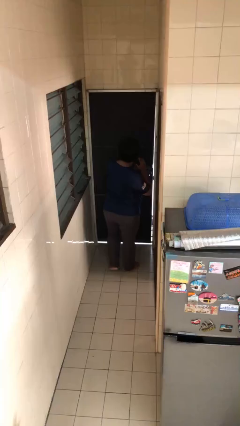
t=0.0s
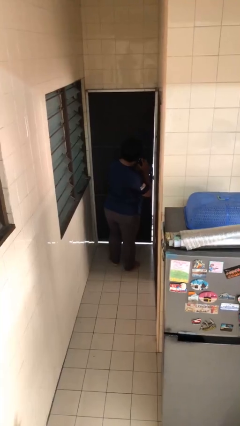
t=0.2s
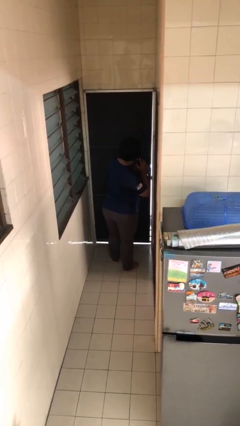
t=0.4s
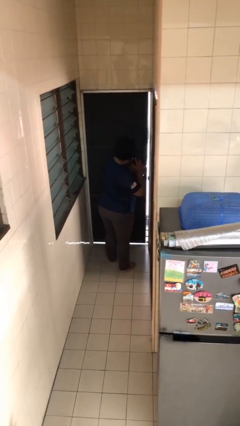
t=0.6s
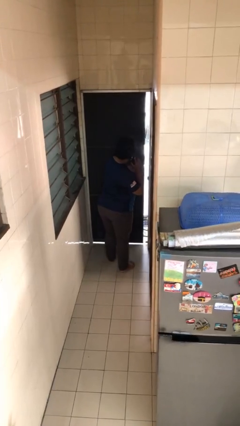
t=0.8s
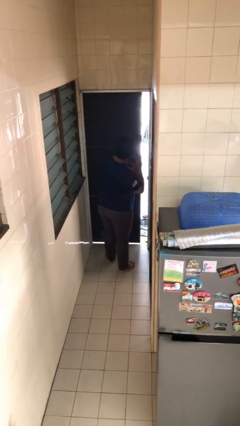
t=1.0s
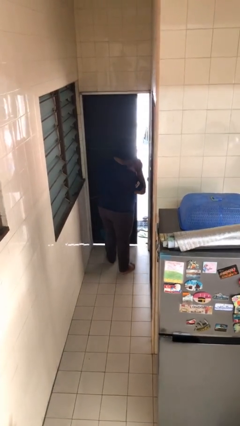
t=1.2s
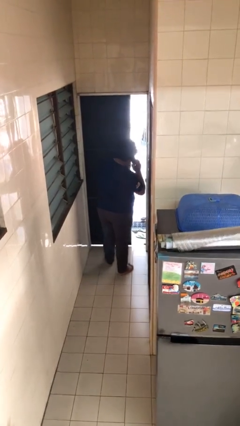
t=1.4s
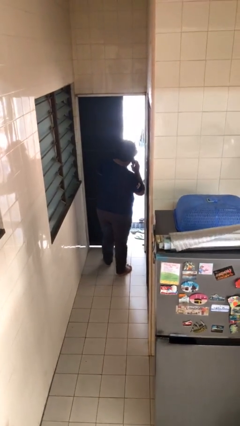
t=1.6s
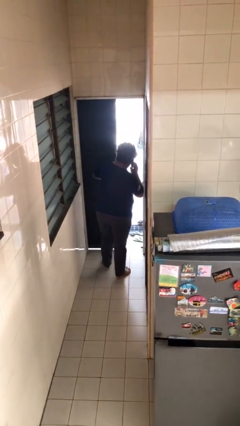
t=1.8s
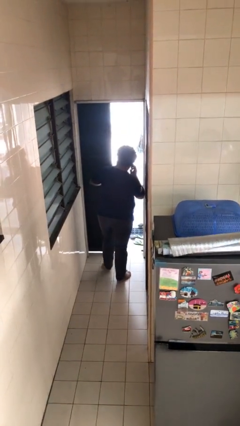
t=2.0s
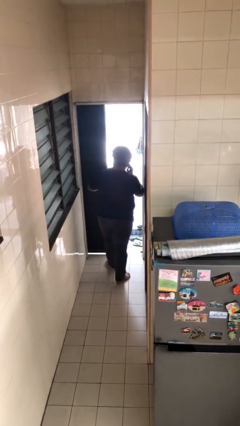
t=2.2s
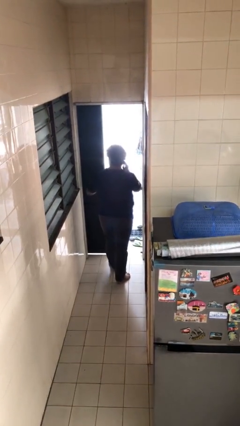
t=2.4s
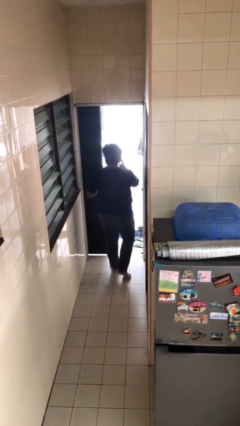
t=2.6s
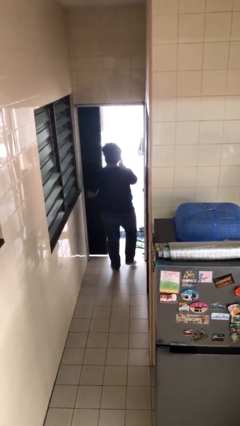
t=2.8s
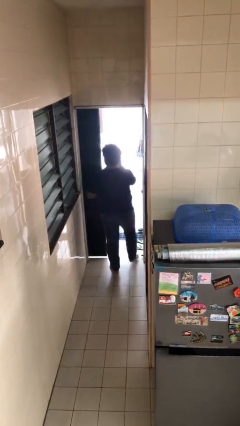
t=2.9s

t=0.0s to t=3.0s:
person opens facility door

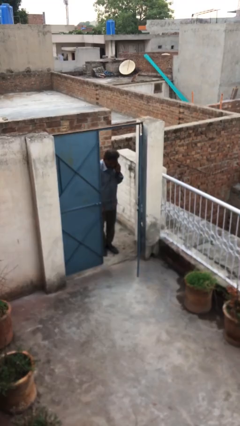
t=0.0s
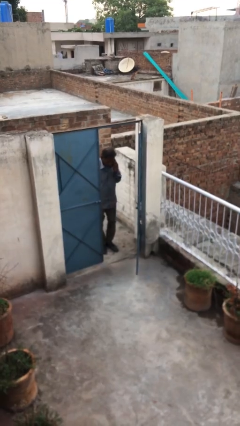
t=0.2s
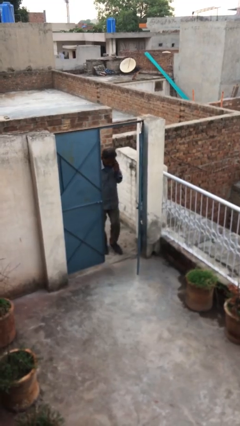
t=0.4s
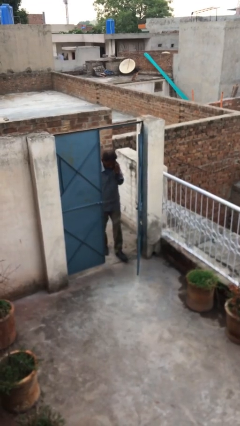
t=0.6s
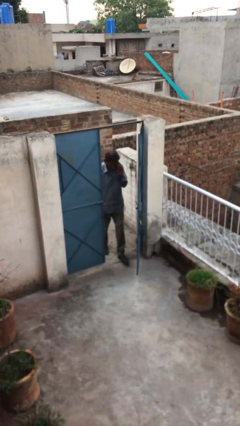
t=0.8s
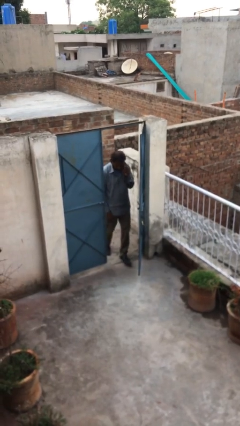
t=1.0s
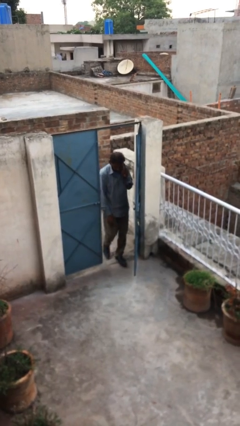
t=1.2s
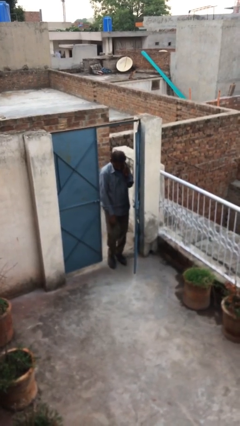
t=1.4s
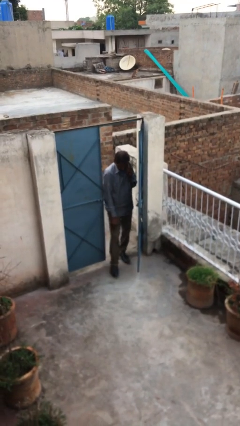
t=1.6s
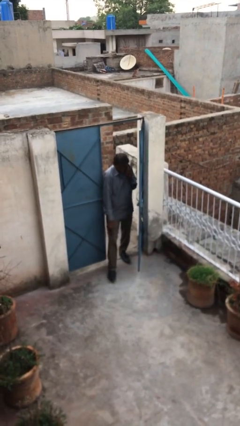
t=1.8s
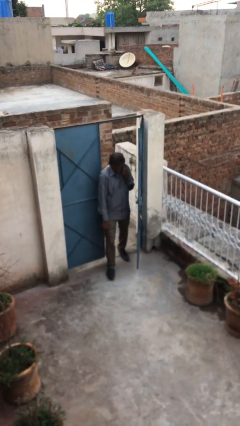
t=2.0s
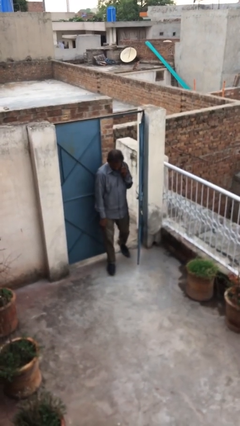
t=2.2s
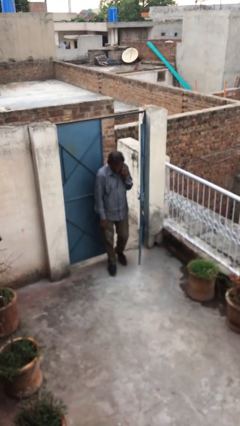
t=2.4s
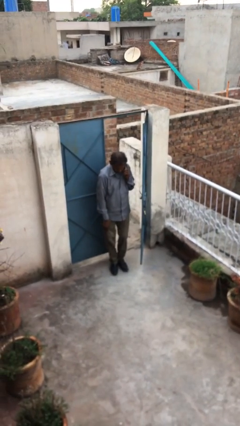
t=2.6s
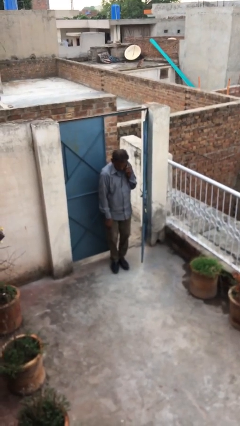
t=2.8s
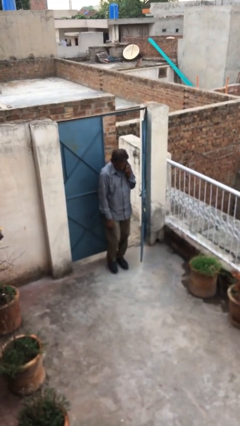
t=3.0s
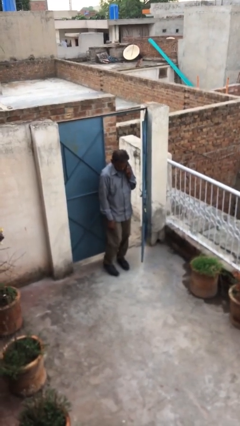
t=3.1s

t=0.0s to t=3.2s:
person enters scene through structure

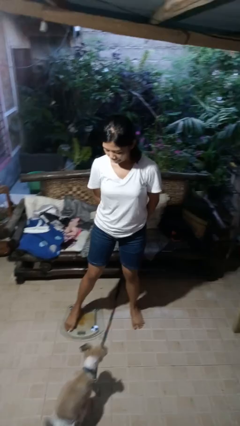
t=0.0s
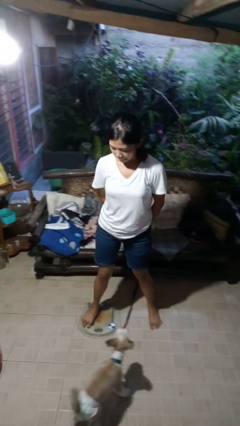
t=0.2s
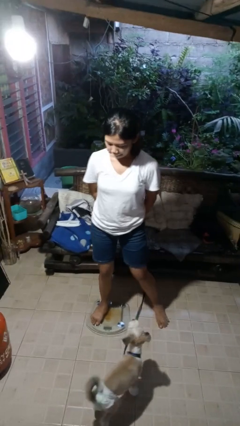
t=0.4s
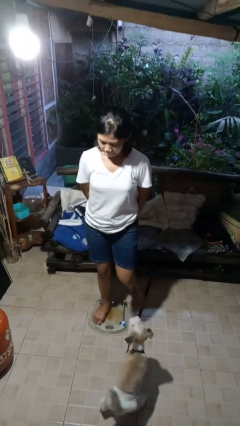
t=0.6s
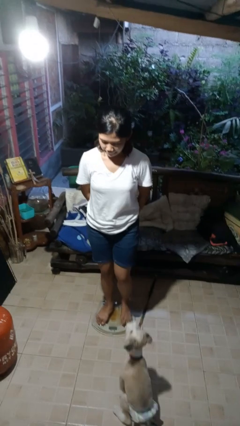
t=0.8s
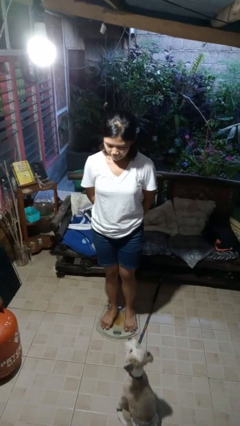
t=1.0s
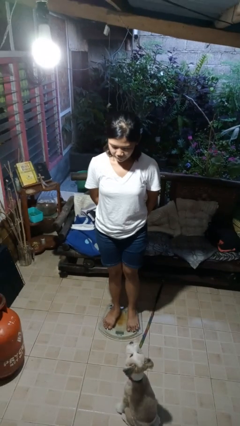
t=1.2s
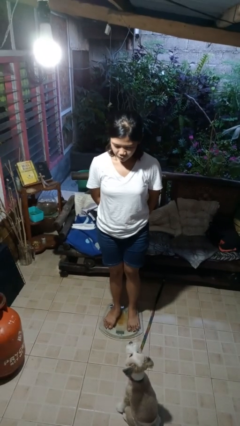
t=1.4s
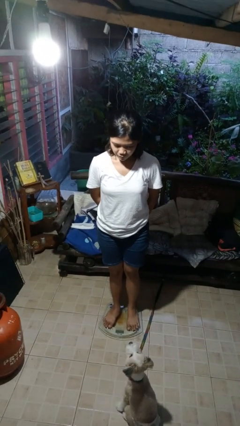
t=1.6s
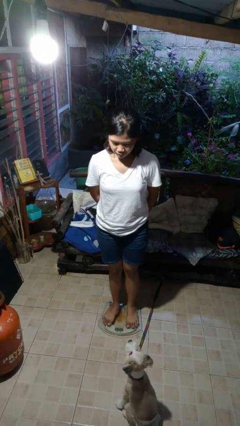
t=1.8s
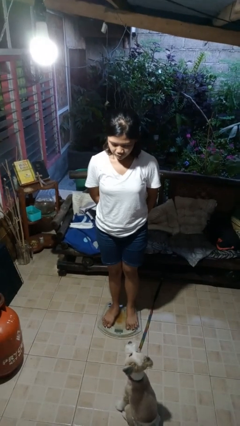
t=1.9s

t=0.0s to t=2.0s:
person uses bodyweight scale

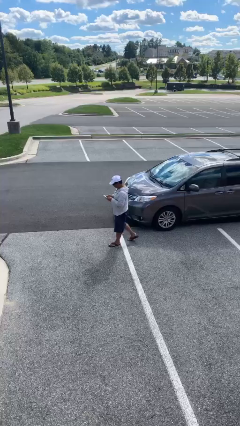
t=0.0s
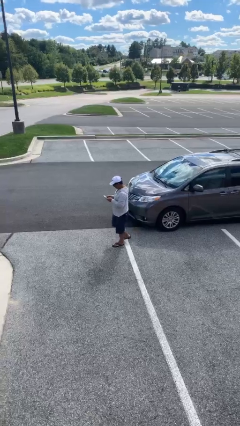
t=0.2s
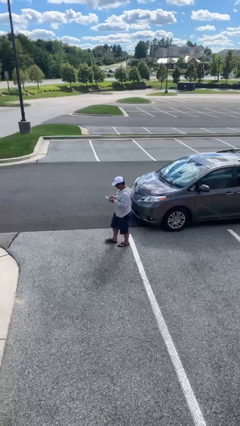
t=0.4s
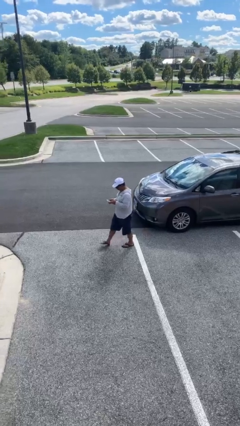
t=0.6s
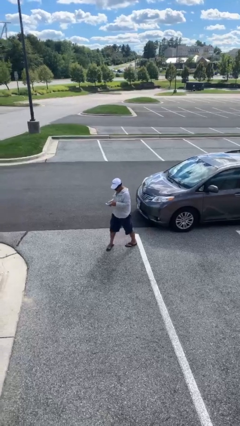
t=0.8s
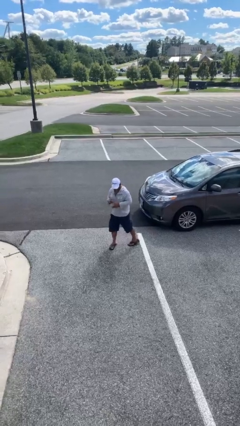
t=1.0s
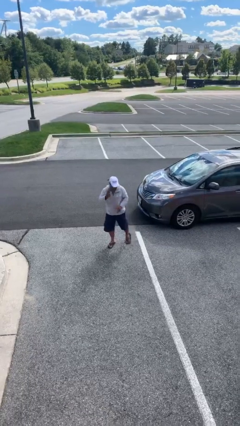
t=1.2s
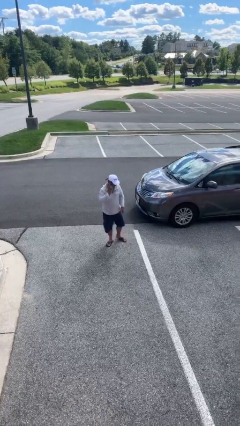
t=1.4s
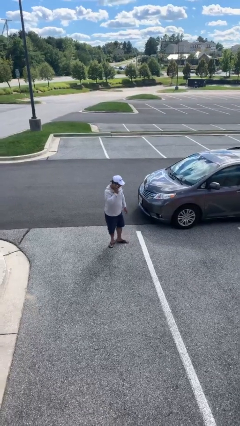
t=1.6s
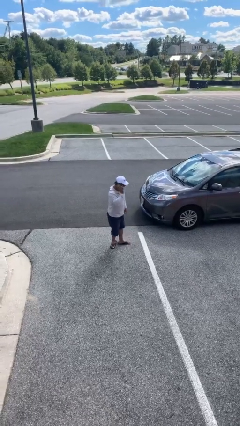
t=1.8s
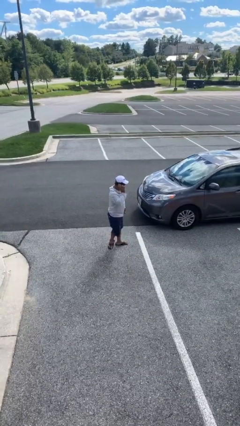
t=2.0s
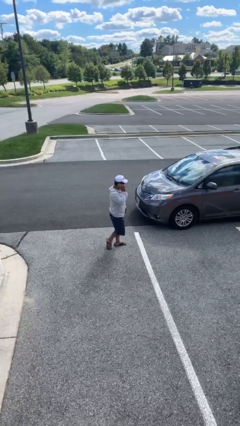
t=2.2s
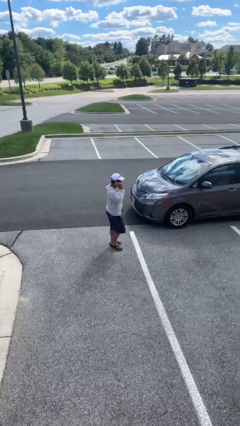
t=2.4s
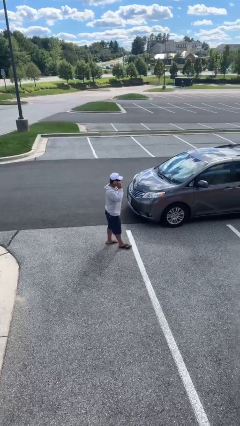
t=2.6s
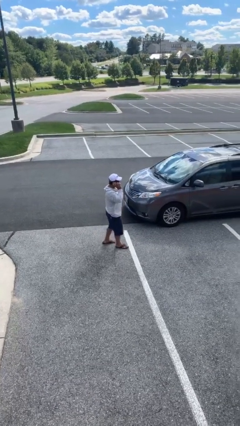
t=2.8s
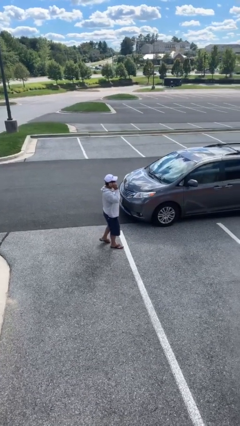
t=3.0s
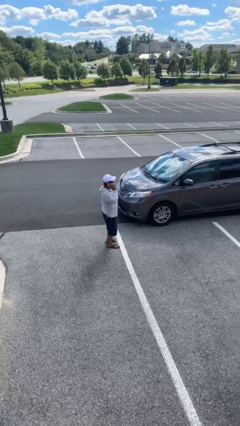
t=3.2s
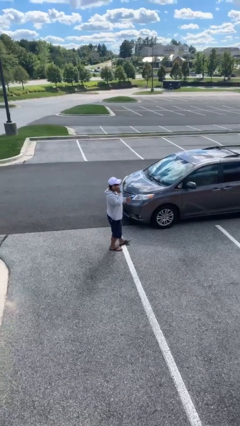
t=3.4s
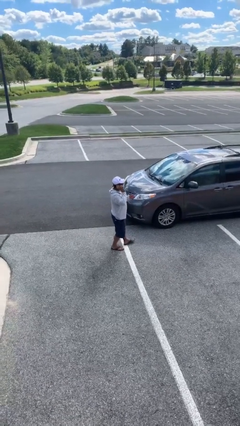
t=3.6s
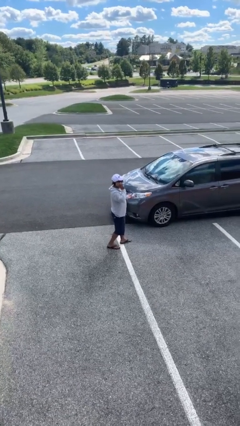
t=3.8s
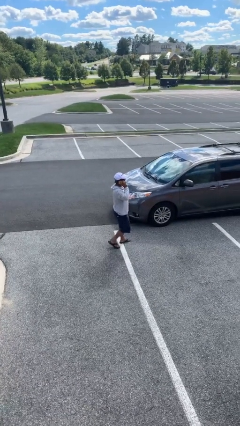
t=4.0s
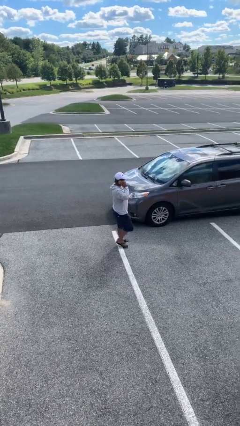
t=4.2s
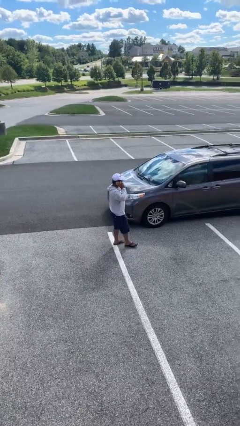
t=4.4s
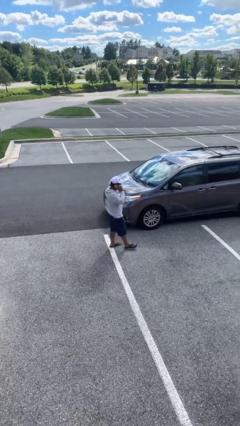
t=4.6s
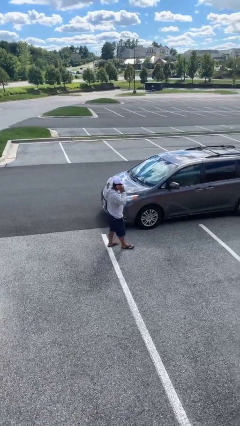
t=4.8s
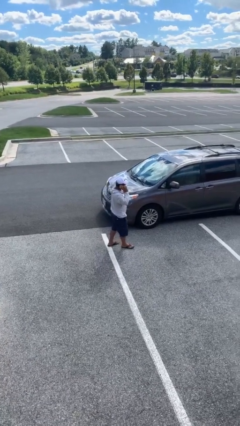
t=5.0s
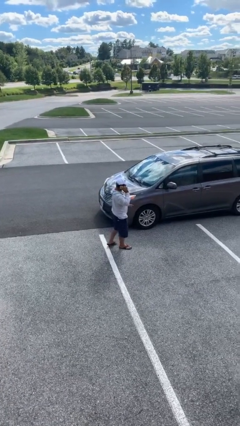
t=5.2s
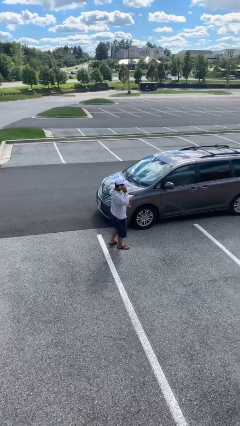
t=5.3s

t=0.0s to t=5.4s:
person talks on phone

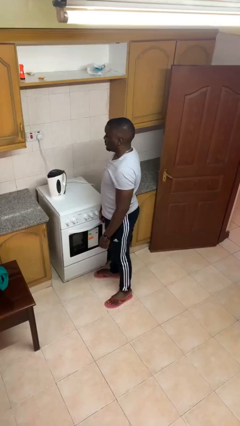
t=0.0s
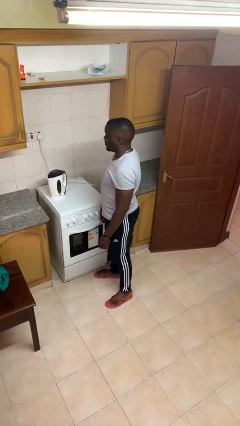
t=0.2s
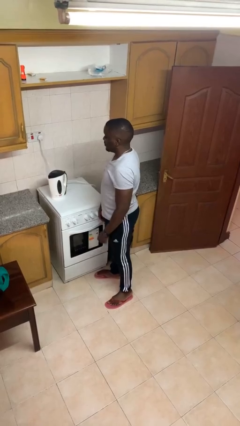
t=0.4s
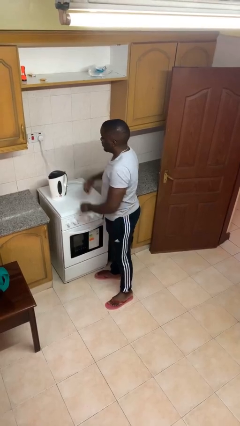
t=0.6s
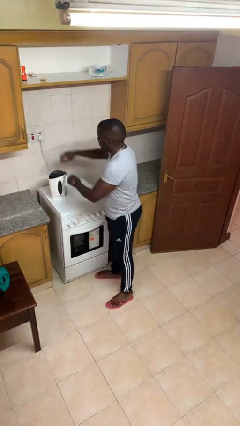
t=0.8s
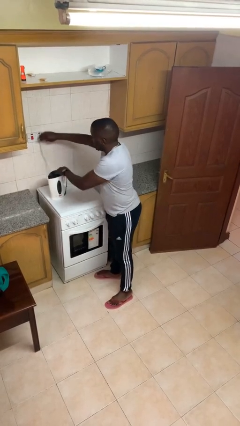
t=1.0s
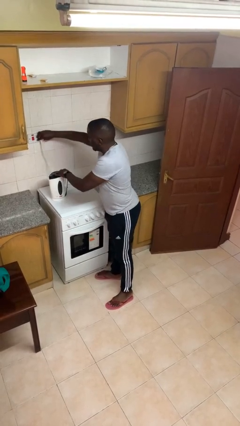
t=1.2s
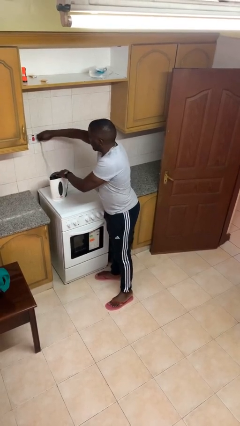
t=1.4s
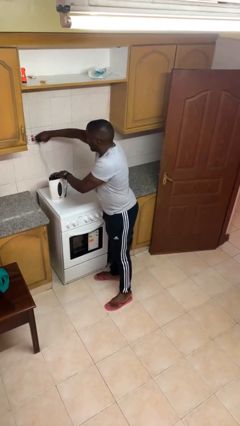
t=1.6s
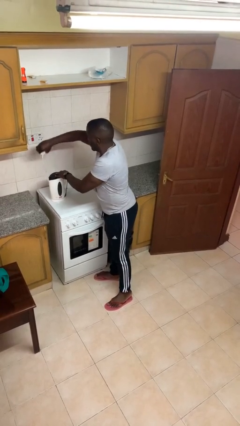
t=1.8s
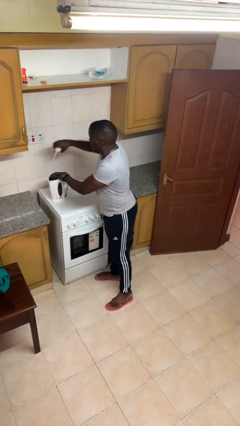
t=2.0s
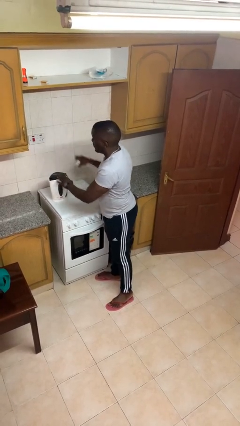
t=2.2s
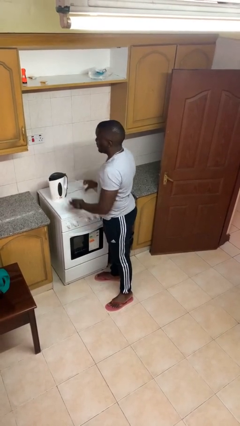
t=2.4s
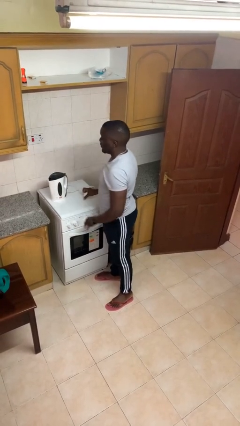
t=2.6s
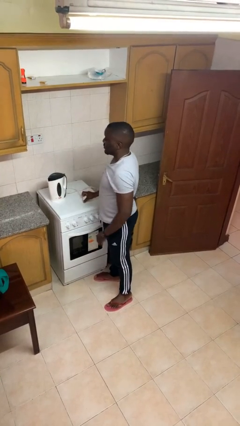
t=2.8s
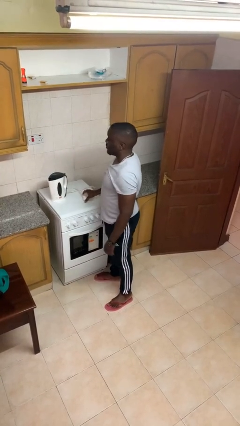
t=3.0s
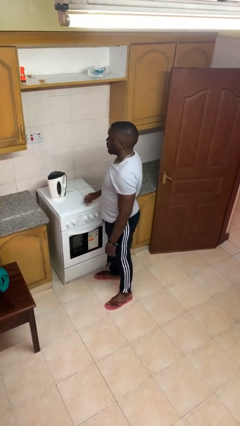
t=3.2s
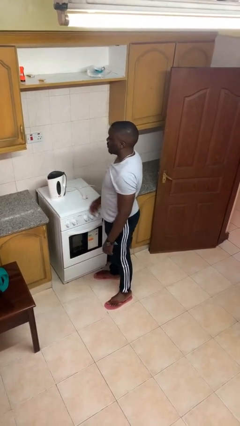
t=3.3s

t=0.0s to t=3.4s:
person unplugs from electrical socket

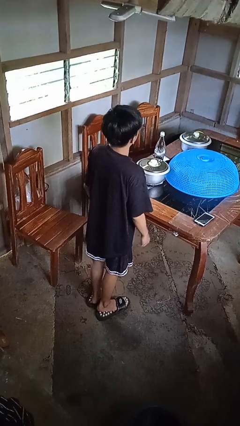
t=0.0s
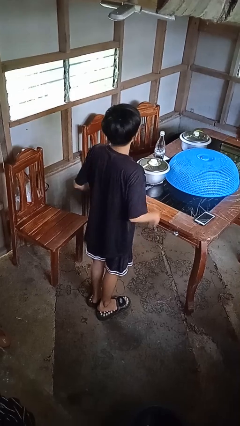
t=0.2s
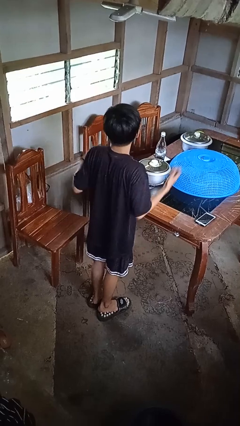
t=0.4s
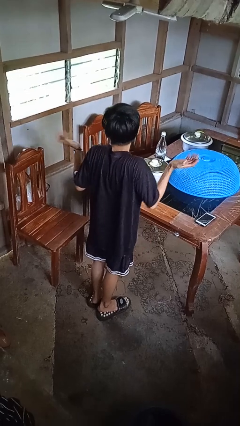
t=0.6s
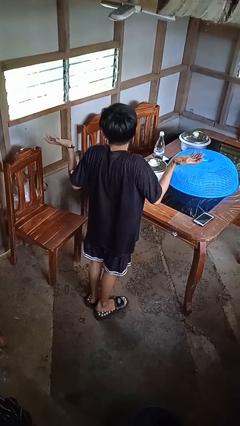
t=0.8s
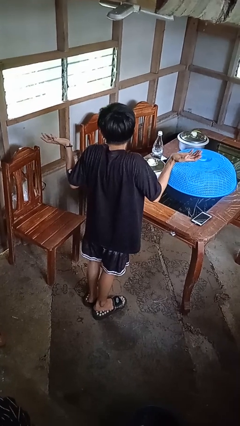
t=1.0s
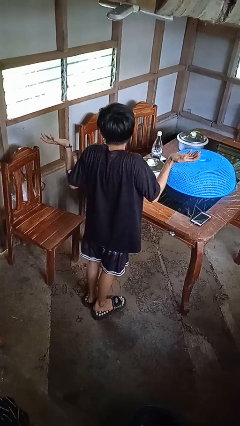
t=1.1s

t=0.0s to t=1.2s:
person shrugs
